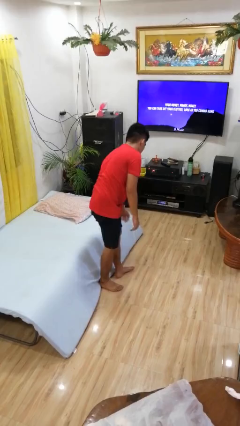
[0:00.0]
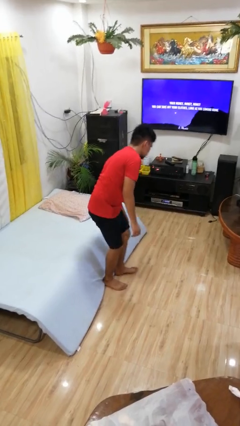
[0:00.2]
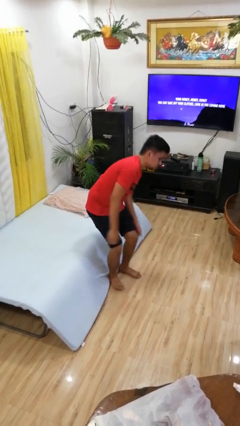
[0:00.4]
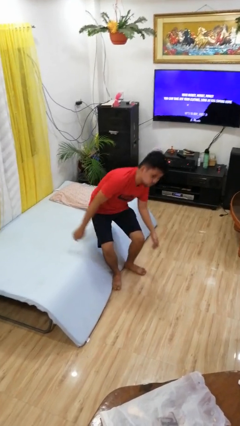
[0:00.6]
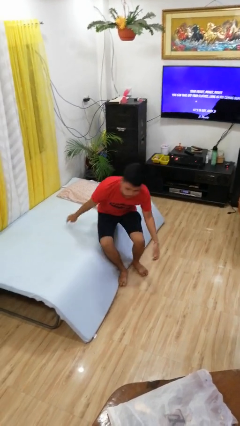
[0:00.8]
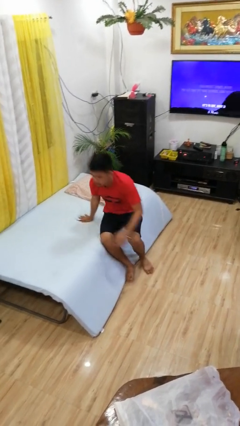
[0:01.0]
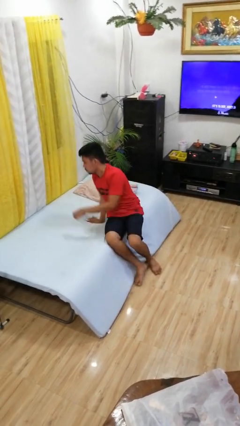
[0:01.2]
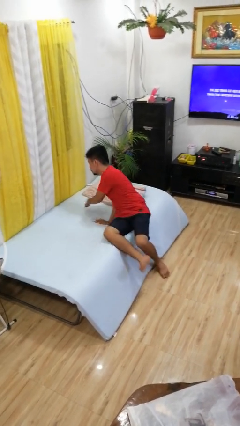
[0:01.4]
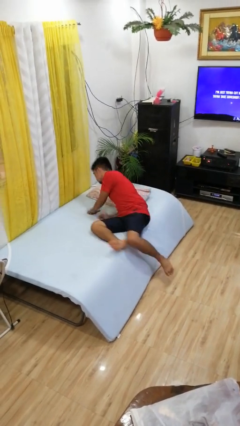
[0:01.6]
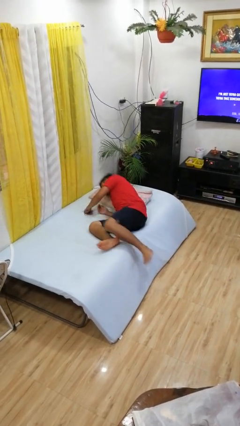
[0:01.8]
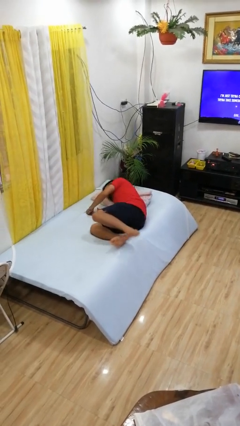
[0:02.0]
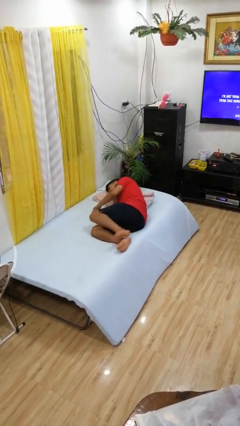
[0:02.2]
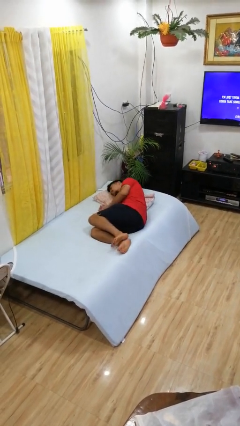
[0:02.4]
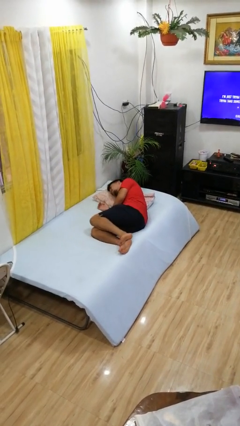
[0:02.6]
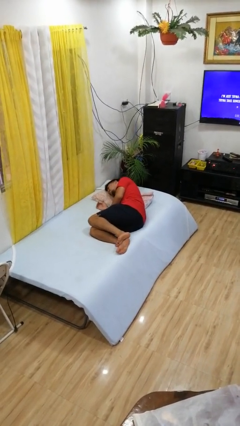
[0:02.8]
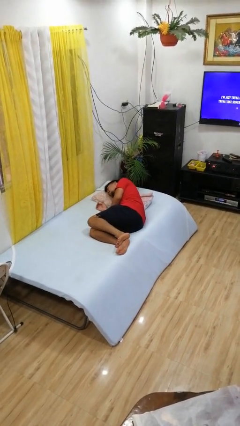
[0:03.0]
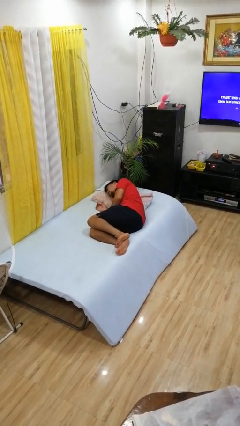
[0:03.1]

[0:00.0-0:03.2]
person lies down on bed

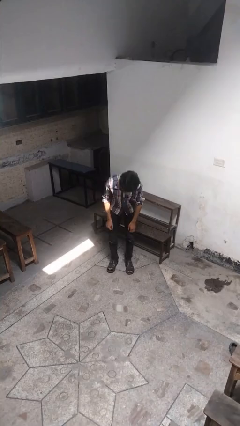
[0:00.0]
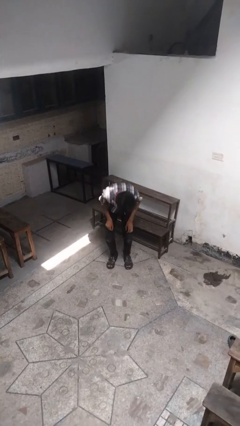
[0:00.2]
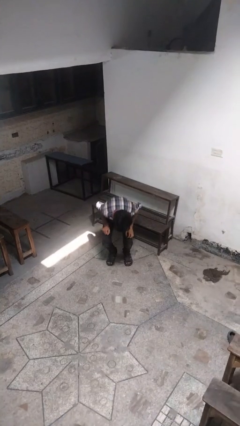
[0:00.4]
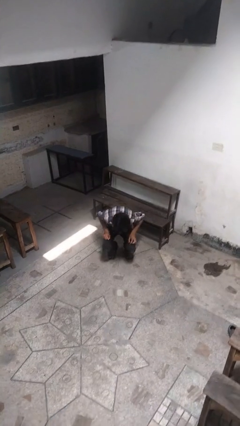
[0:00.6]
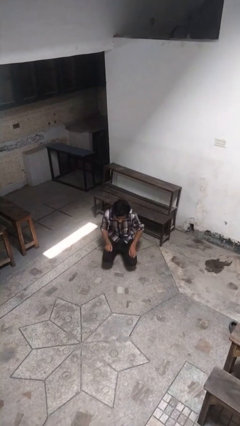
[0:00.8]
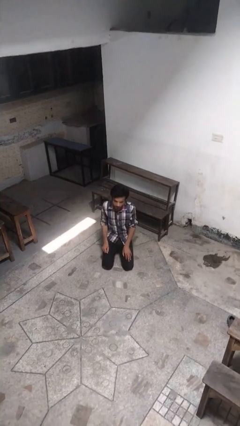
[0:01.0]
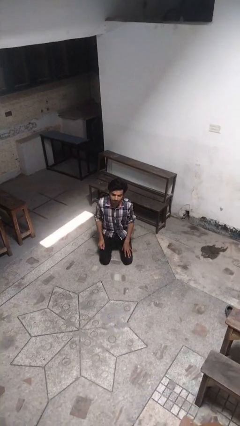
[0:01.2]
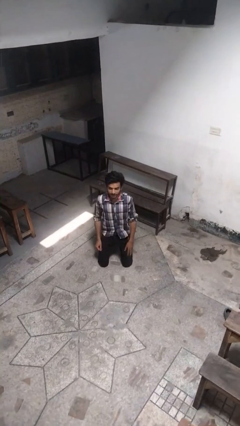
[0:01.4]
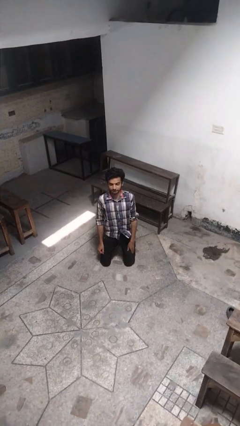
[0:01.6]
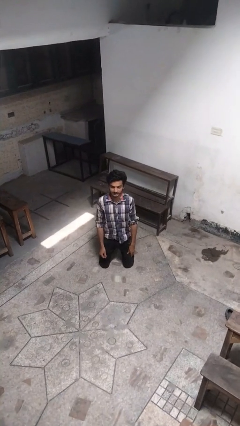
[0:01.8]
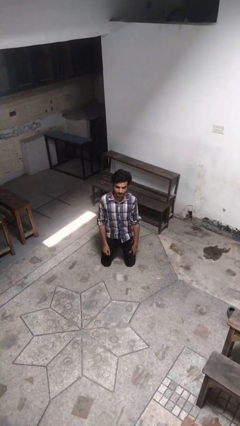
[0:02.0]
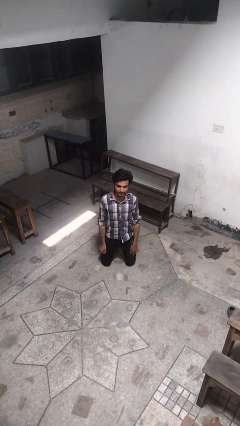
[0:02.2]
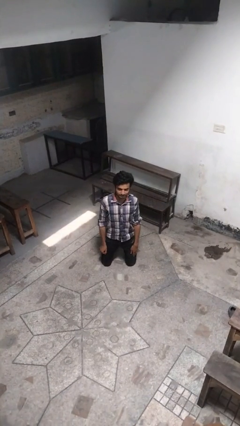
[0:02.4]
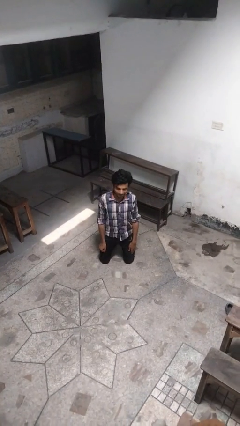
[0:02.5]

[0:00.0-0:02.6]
person kneels

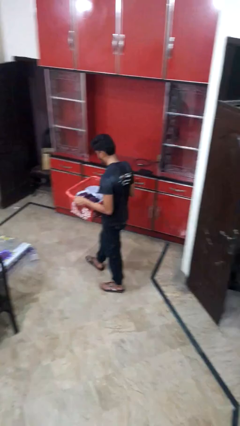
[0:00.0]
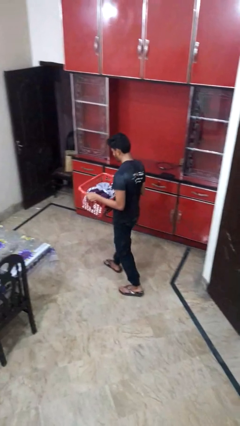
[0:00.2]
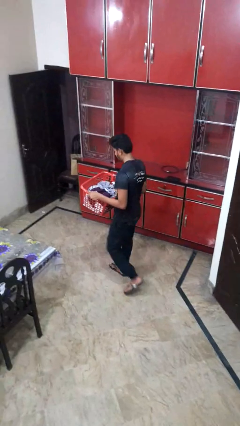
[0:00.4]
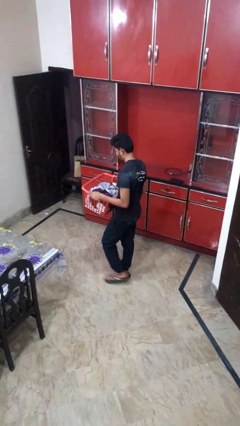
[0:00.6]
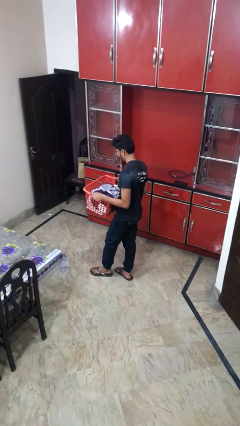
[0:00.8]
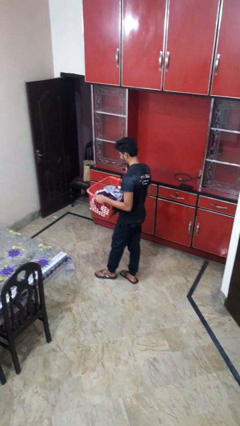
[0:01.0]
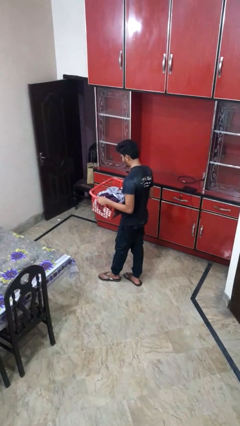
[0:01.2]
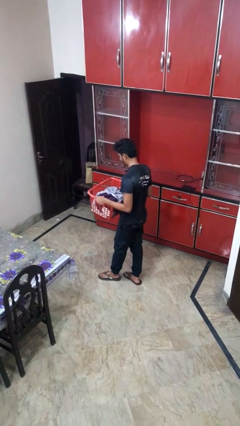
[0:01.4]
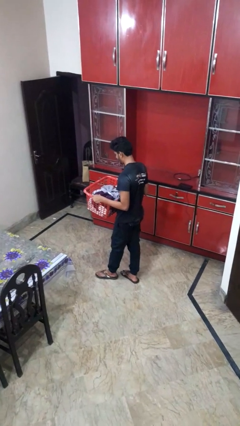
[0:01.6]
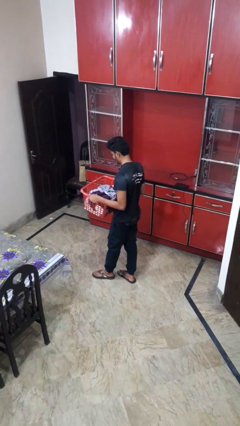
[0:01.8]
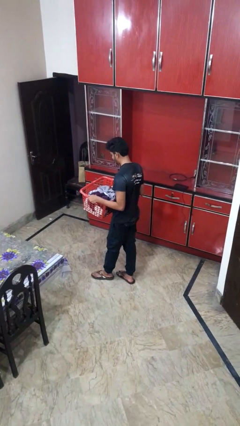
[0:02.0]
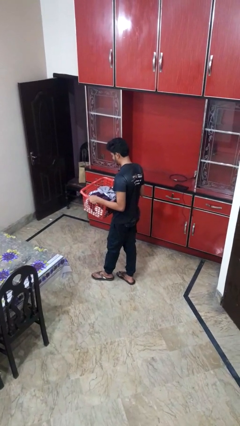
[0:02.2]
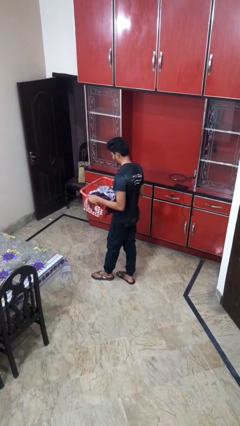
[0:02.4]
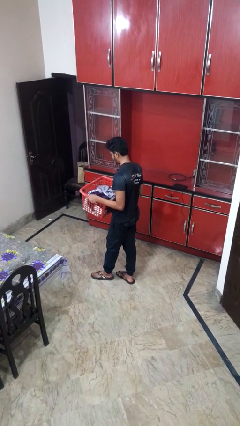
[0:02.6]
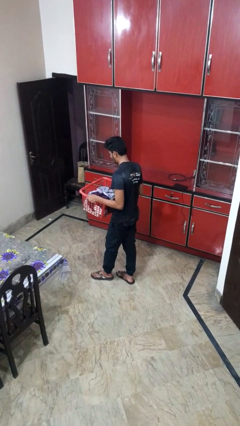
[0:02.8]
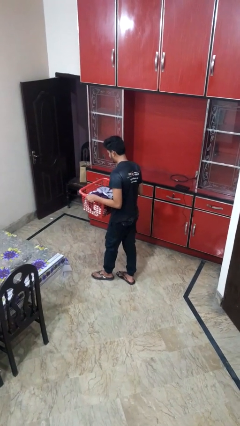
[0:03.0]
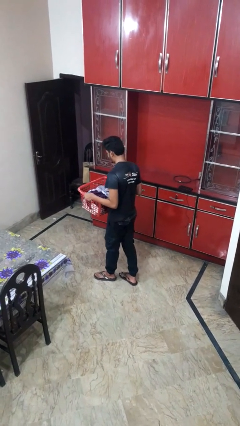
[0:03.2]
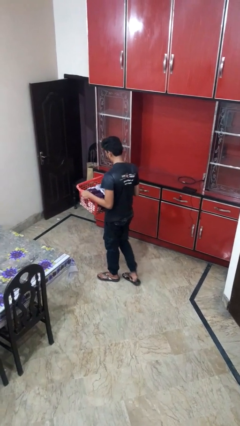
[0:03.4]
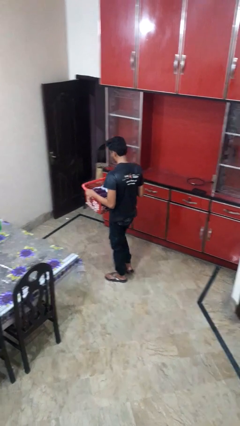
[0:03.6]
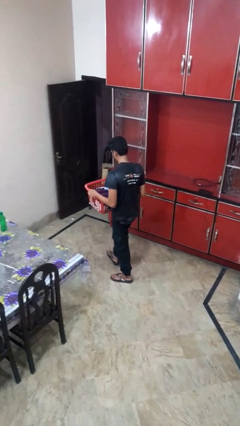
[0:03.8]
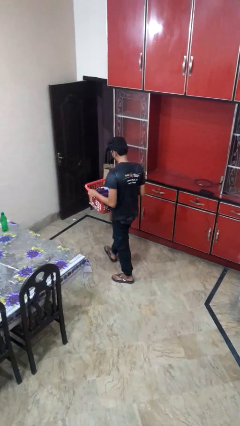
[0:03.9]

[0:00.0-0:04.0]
person carries furniture

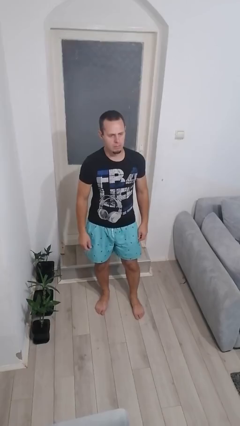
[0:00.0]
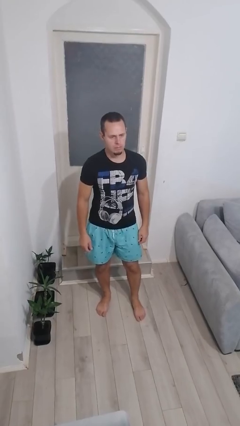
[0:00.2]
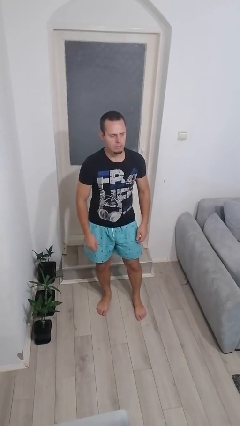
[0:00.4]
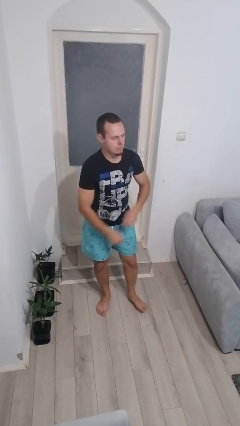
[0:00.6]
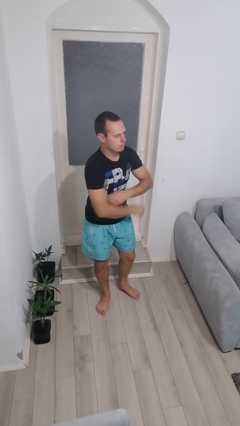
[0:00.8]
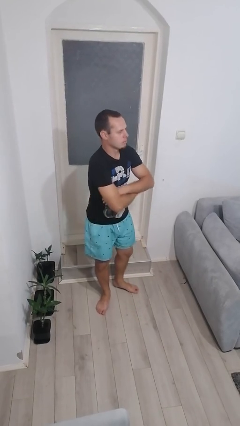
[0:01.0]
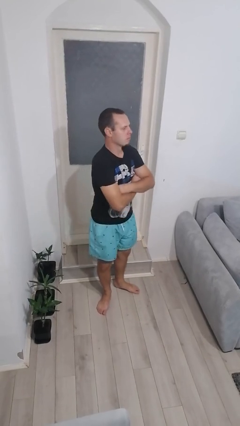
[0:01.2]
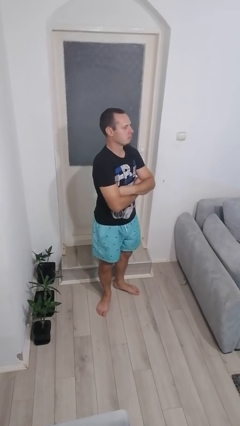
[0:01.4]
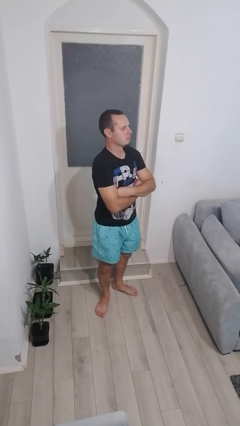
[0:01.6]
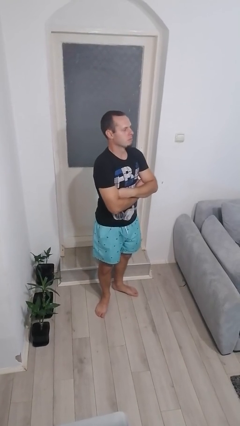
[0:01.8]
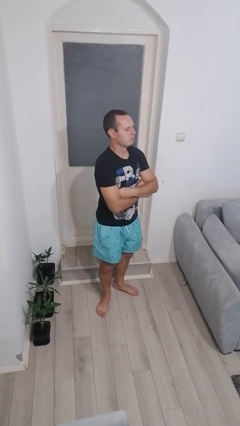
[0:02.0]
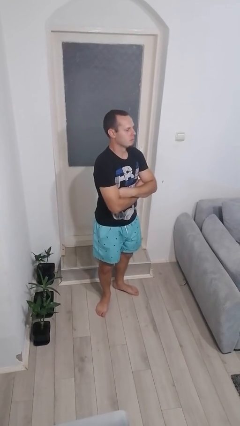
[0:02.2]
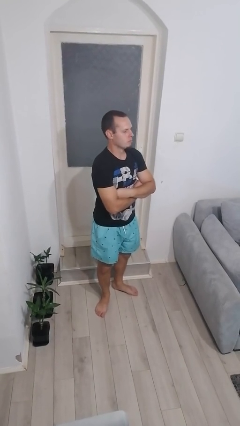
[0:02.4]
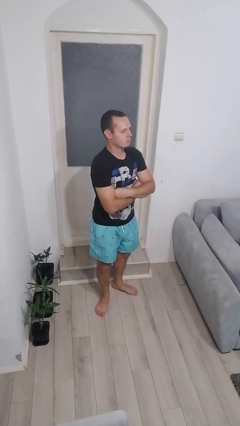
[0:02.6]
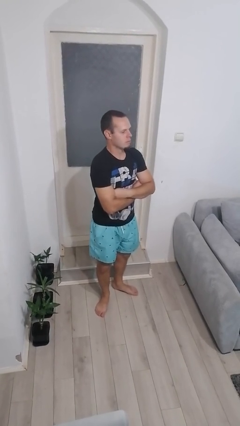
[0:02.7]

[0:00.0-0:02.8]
person crosses arms

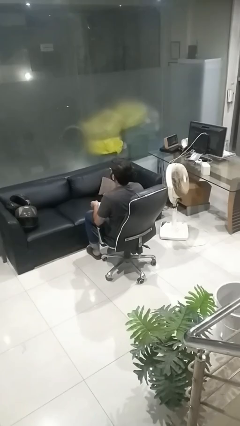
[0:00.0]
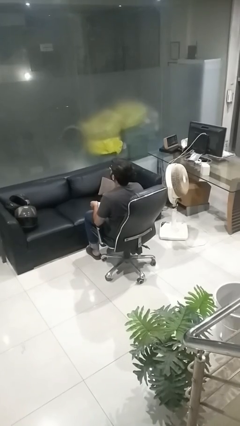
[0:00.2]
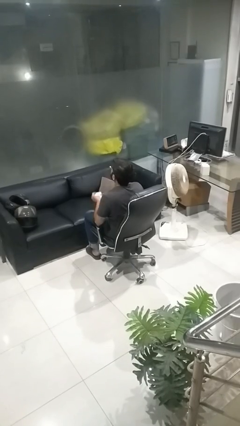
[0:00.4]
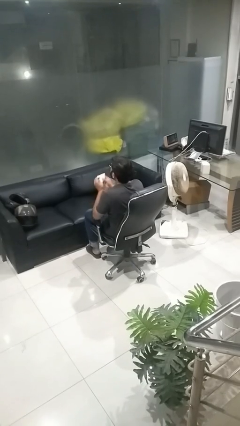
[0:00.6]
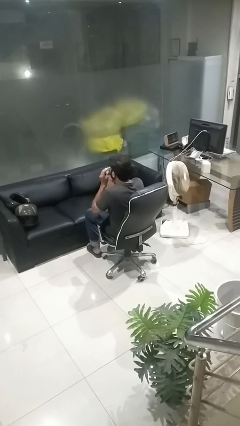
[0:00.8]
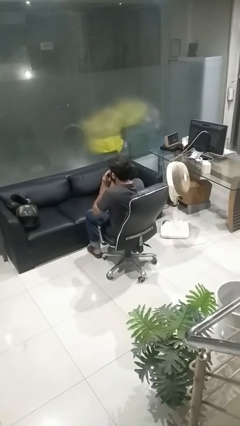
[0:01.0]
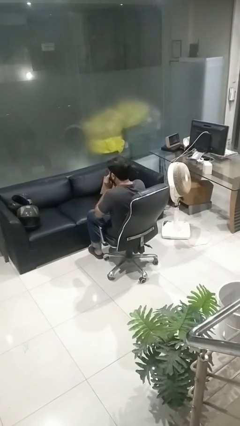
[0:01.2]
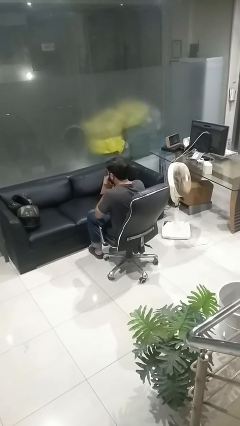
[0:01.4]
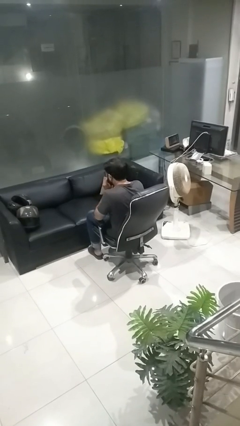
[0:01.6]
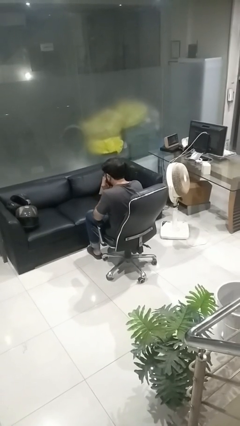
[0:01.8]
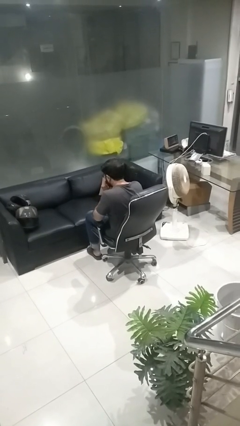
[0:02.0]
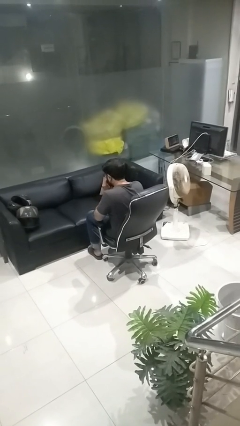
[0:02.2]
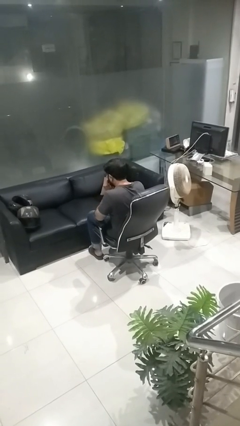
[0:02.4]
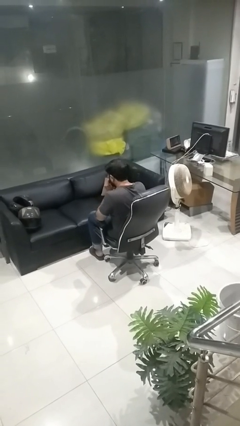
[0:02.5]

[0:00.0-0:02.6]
person blows nose

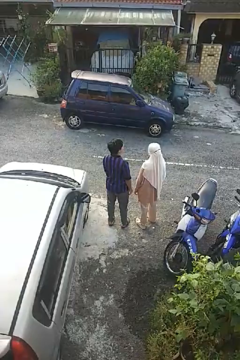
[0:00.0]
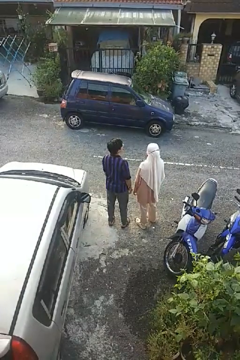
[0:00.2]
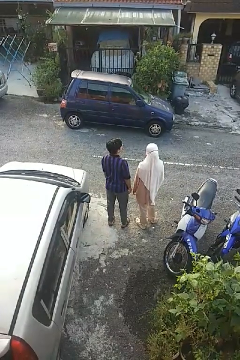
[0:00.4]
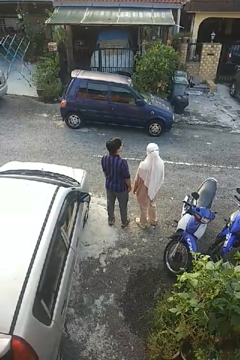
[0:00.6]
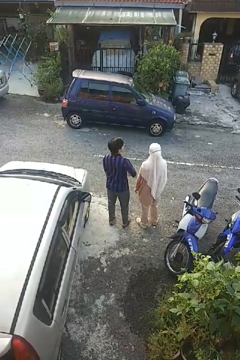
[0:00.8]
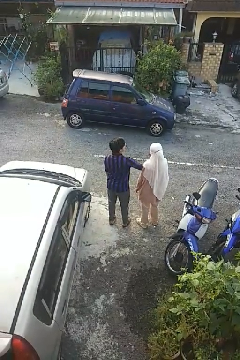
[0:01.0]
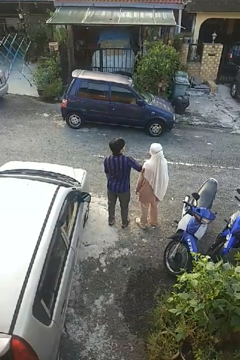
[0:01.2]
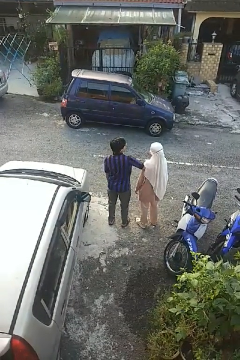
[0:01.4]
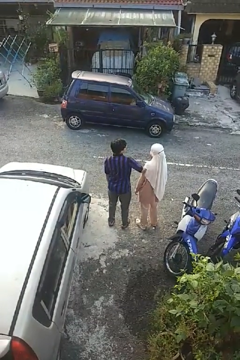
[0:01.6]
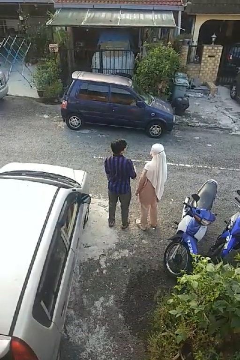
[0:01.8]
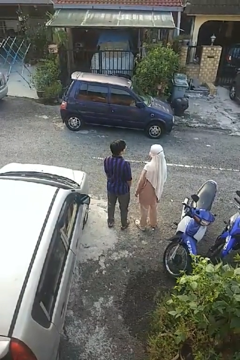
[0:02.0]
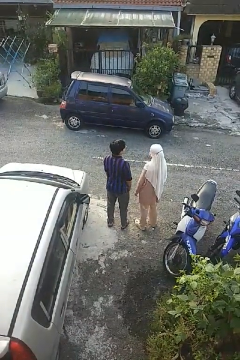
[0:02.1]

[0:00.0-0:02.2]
person nudges person with elbow

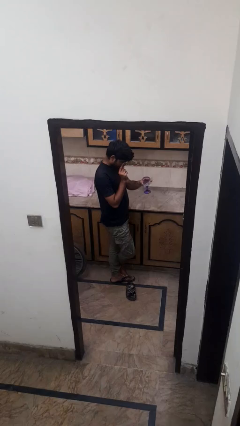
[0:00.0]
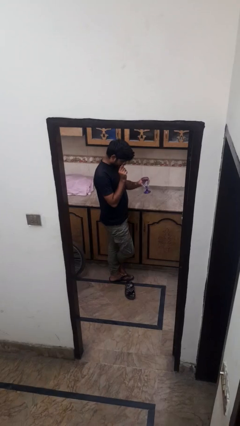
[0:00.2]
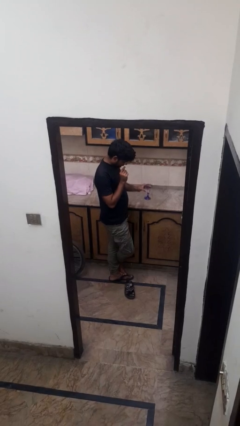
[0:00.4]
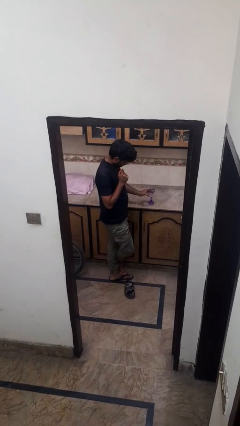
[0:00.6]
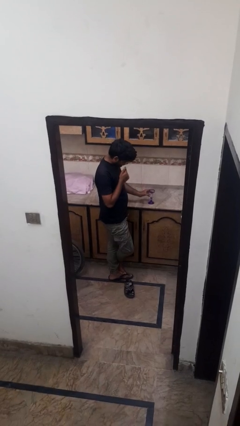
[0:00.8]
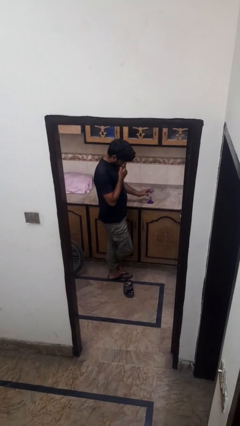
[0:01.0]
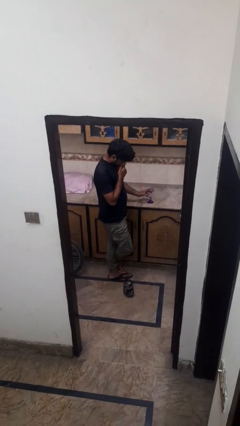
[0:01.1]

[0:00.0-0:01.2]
person puts down object on countertop
